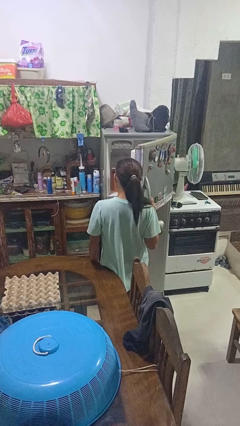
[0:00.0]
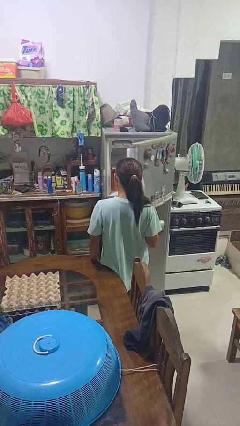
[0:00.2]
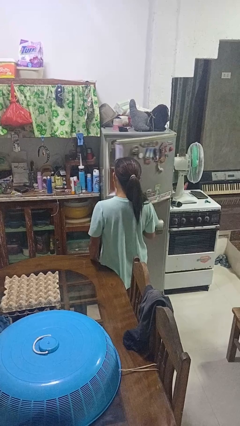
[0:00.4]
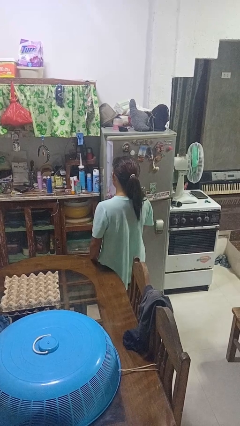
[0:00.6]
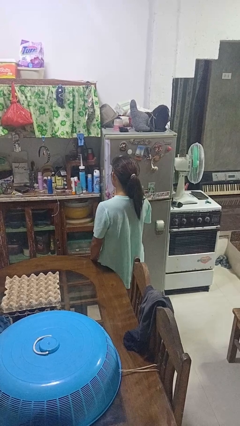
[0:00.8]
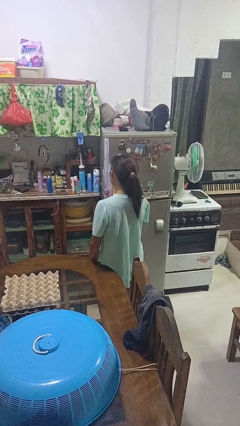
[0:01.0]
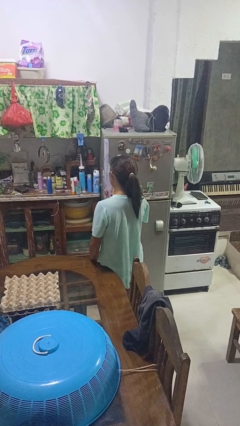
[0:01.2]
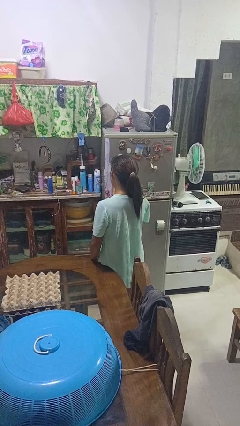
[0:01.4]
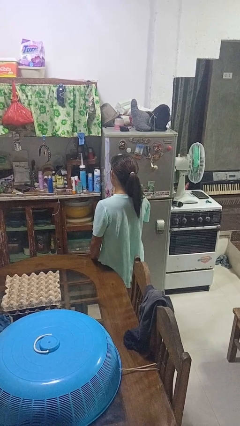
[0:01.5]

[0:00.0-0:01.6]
person closes refrigerator

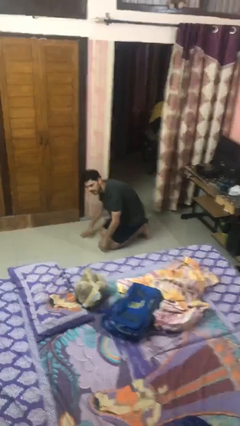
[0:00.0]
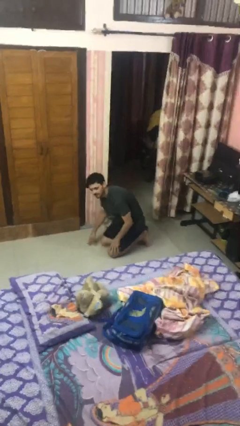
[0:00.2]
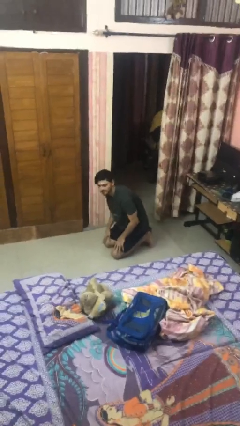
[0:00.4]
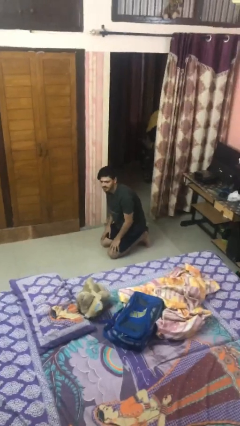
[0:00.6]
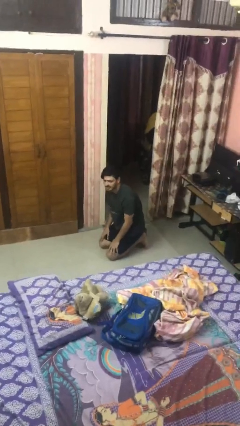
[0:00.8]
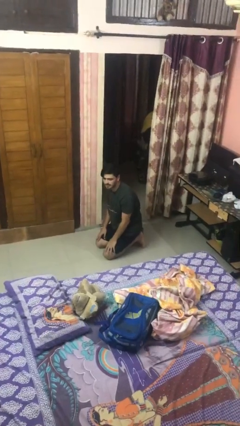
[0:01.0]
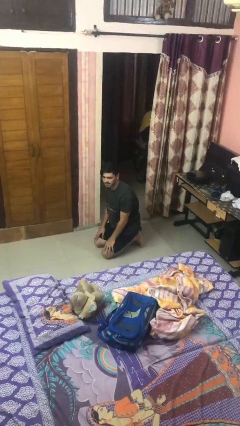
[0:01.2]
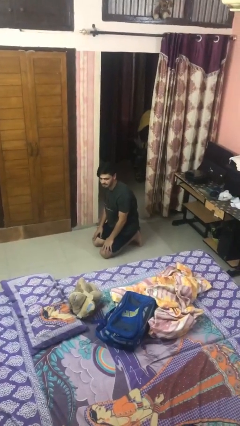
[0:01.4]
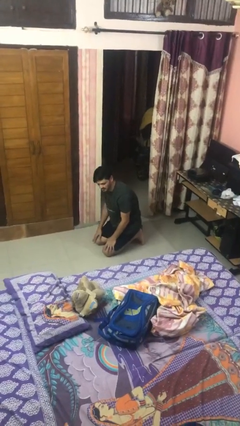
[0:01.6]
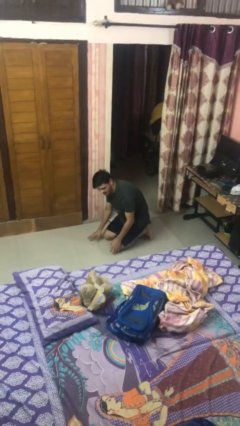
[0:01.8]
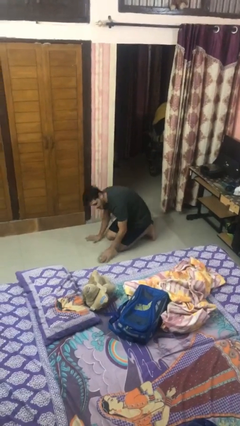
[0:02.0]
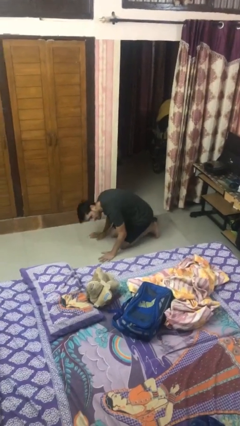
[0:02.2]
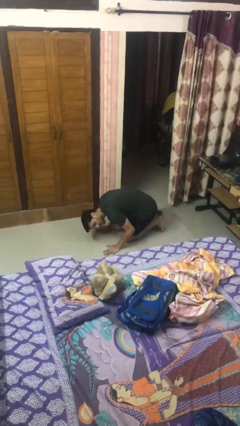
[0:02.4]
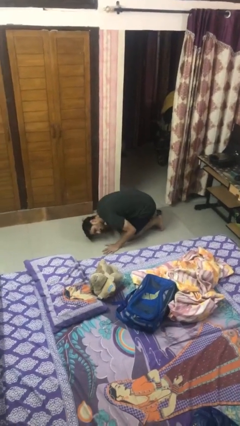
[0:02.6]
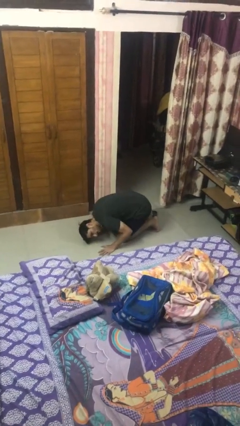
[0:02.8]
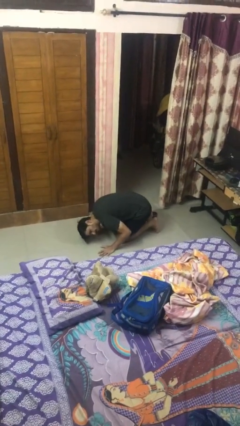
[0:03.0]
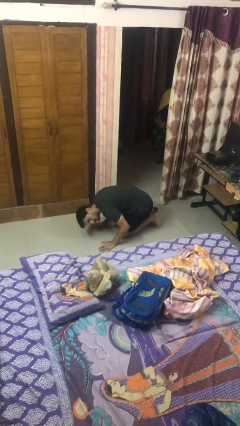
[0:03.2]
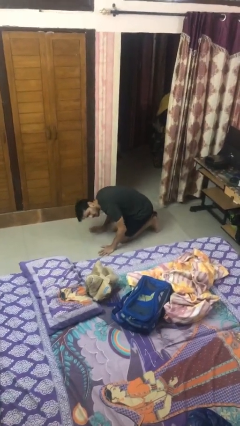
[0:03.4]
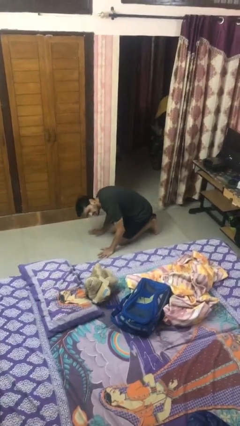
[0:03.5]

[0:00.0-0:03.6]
person searches under bed

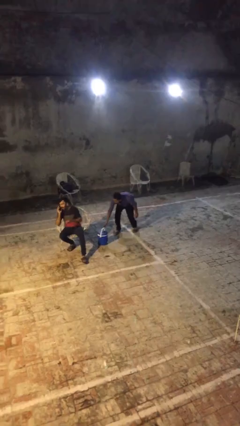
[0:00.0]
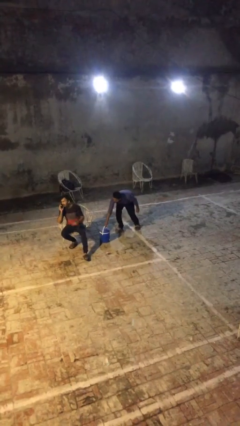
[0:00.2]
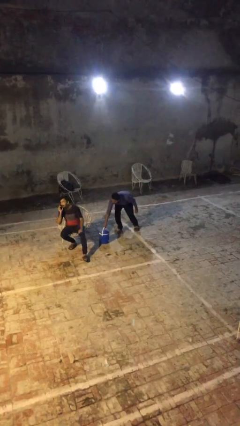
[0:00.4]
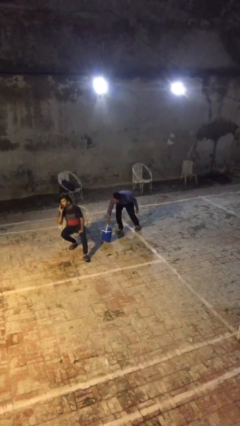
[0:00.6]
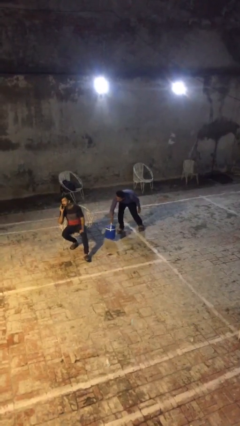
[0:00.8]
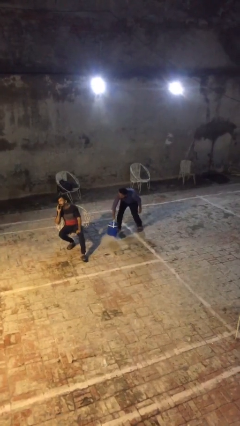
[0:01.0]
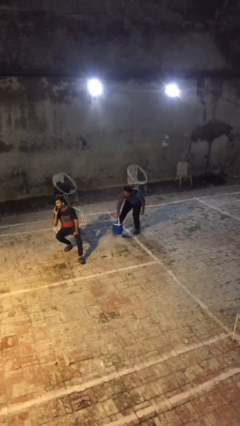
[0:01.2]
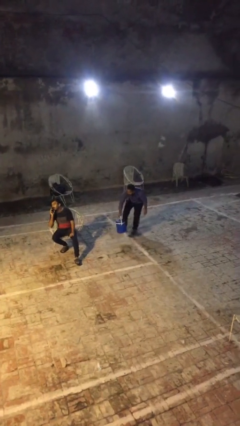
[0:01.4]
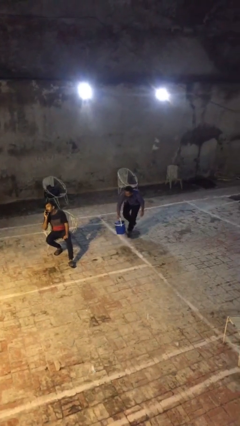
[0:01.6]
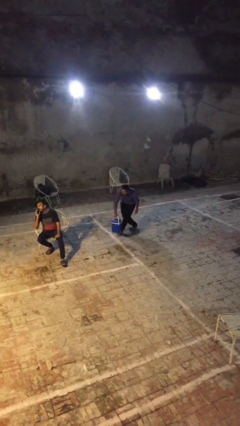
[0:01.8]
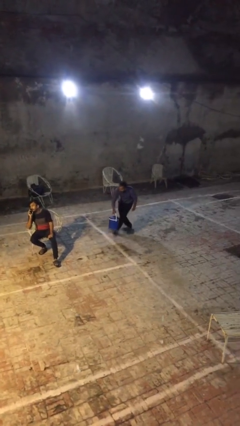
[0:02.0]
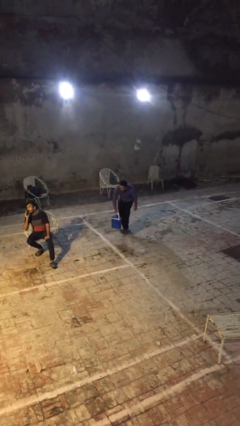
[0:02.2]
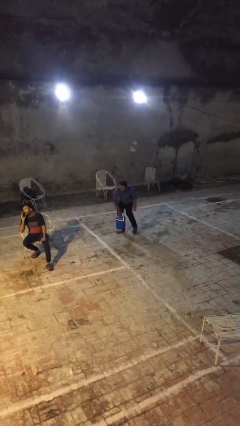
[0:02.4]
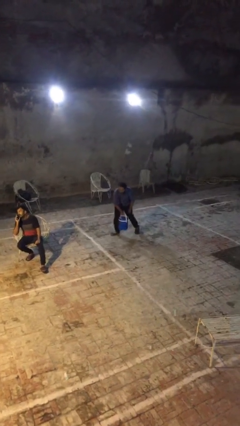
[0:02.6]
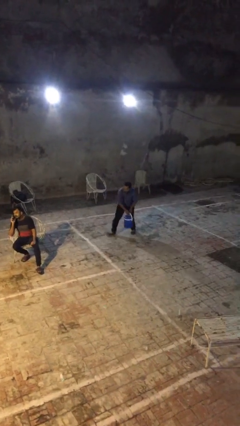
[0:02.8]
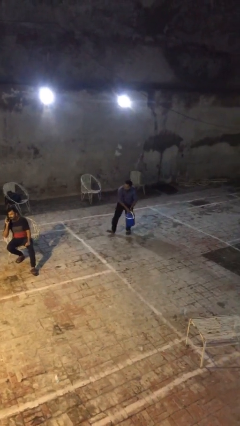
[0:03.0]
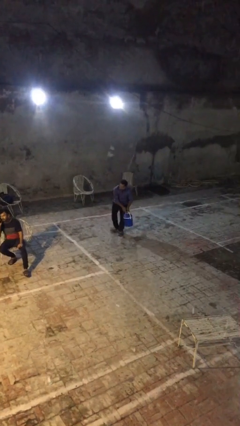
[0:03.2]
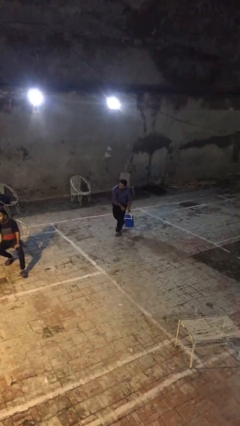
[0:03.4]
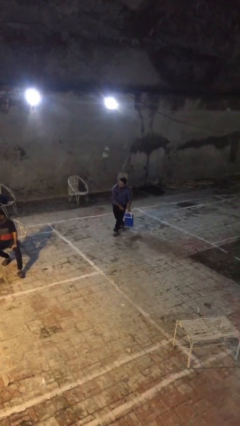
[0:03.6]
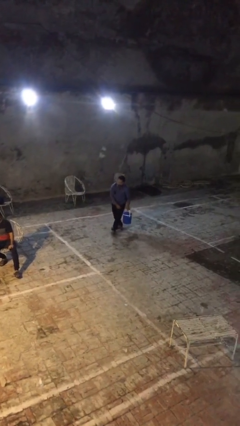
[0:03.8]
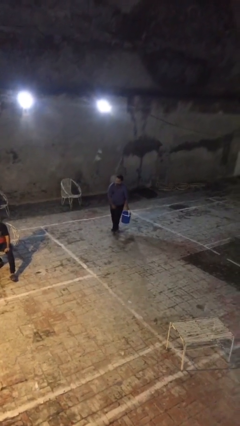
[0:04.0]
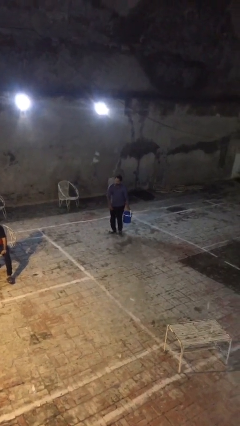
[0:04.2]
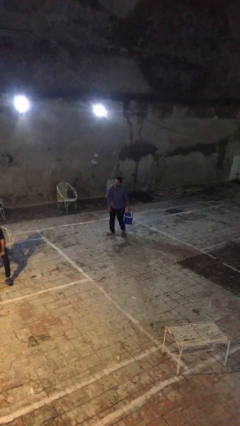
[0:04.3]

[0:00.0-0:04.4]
person steals object from person

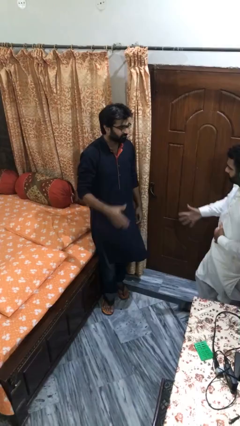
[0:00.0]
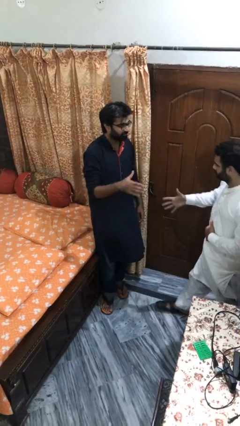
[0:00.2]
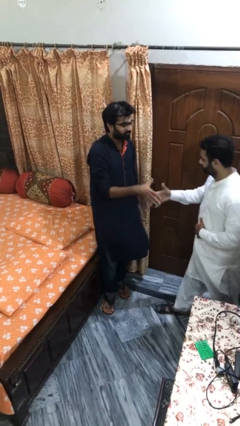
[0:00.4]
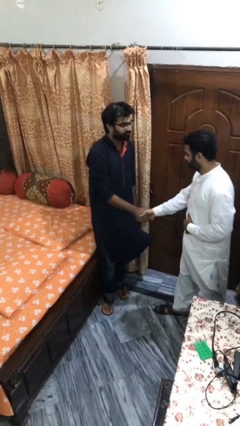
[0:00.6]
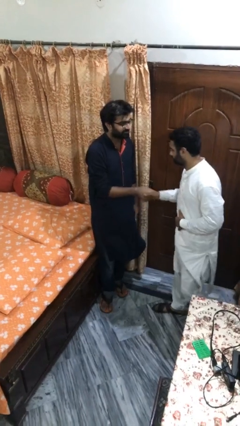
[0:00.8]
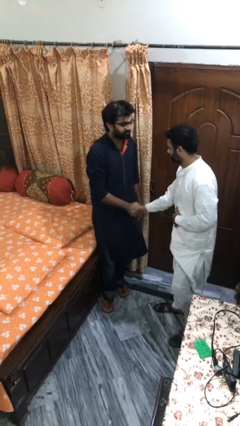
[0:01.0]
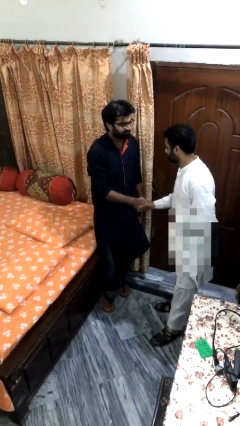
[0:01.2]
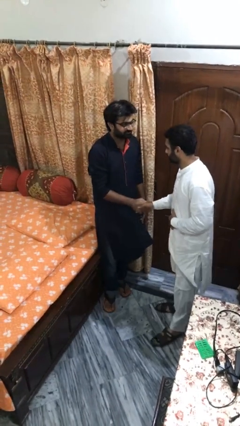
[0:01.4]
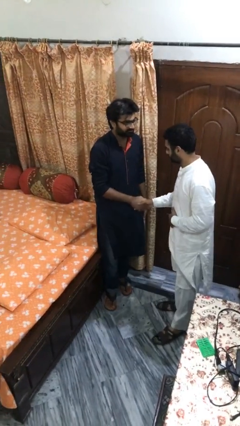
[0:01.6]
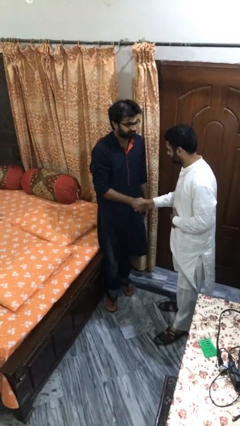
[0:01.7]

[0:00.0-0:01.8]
person shakes hand

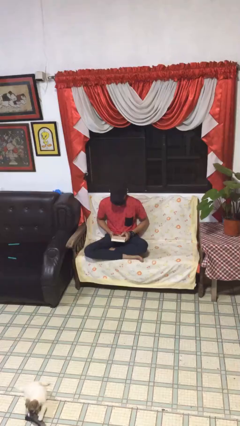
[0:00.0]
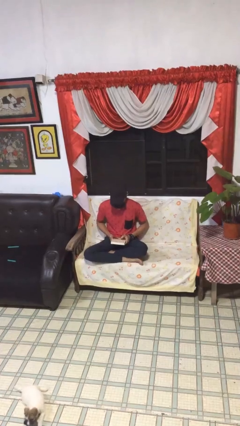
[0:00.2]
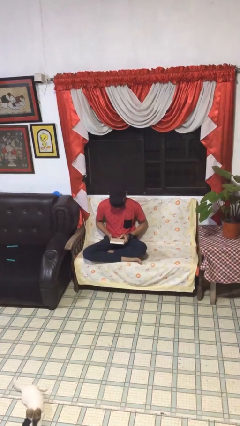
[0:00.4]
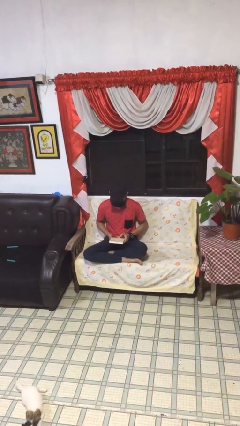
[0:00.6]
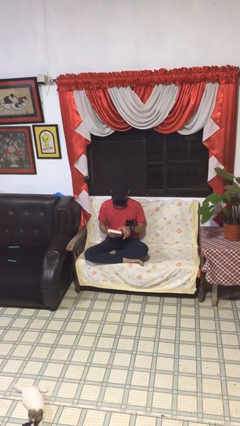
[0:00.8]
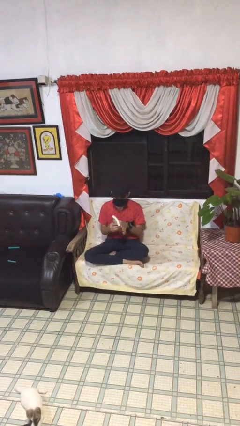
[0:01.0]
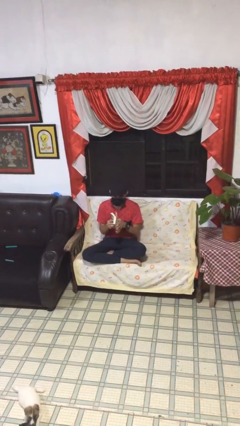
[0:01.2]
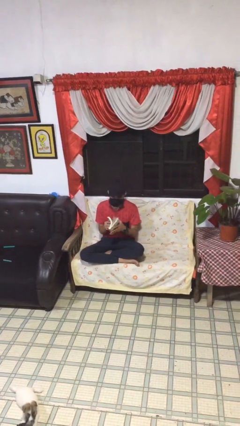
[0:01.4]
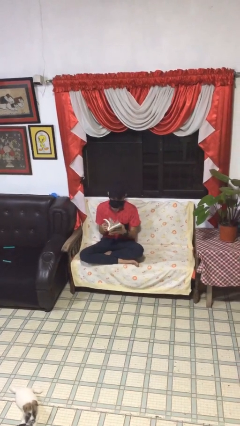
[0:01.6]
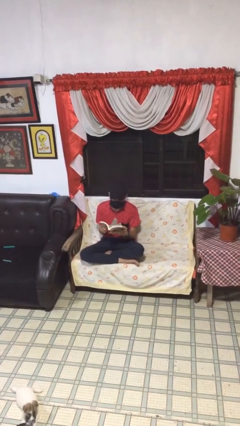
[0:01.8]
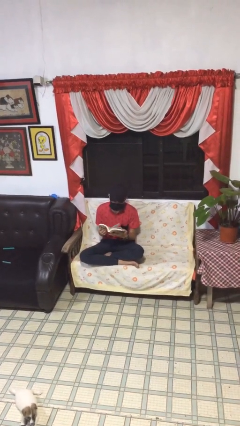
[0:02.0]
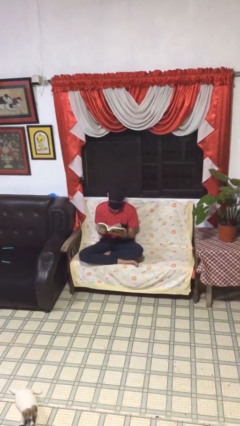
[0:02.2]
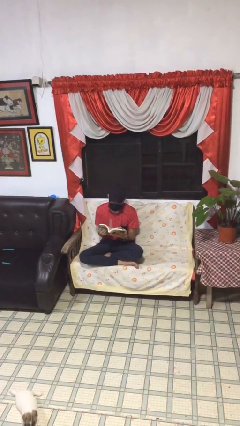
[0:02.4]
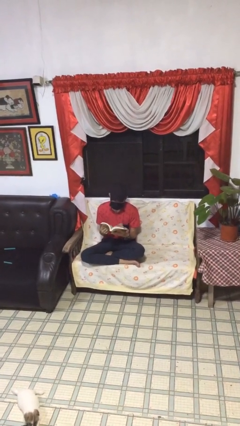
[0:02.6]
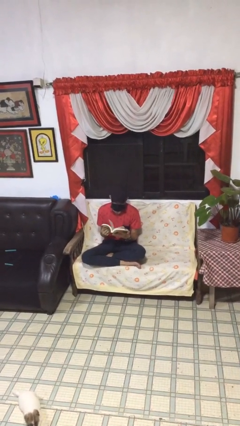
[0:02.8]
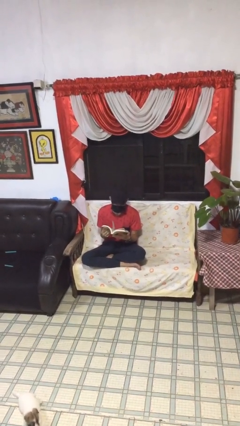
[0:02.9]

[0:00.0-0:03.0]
person reads document

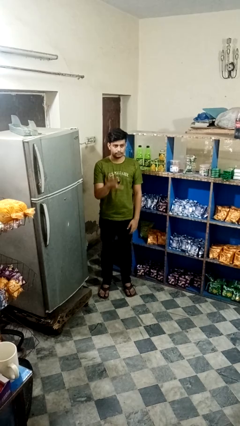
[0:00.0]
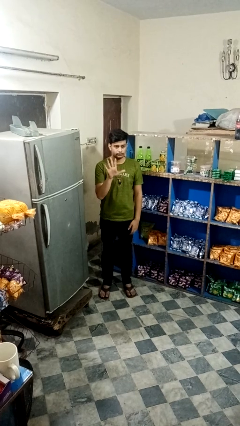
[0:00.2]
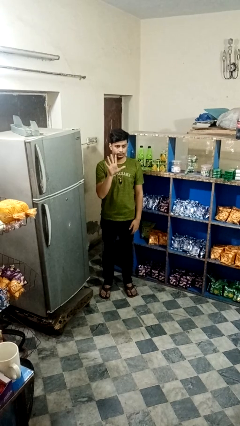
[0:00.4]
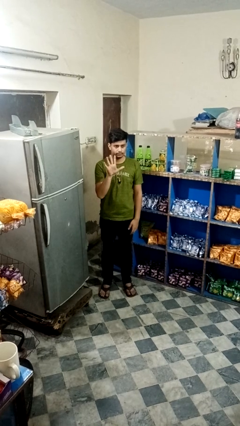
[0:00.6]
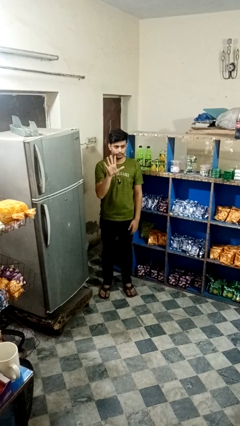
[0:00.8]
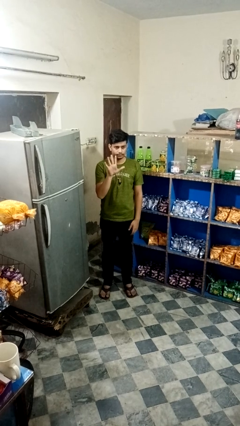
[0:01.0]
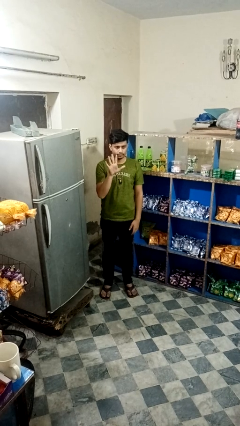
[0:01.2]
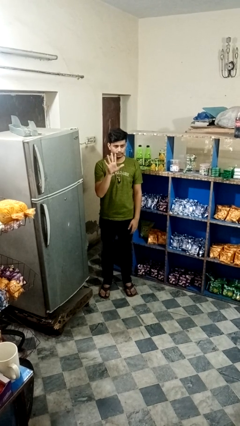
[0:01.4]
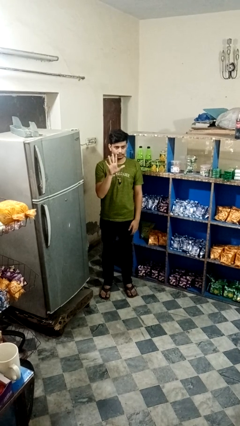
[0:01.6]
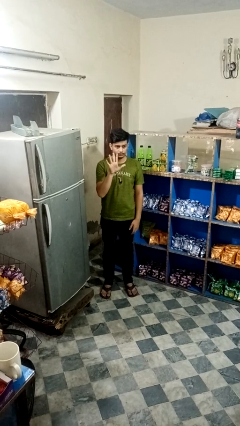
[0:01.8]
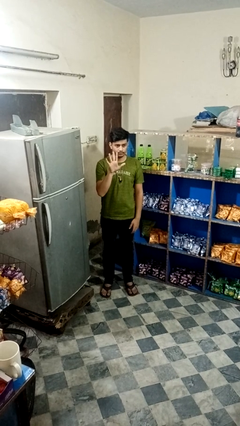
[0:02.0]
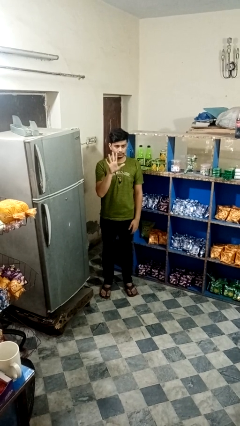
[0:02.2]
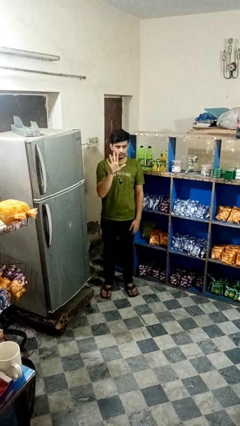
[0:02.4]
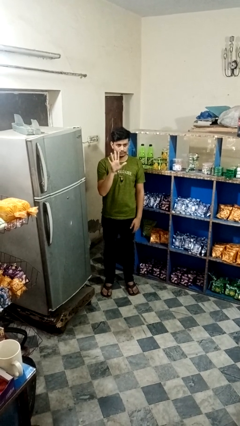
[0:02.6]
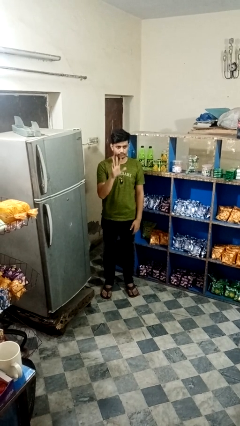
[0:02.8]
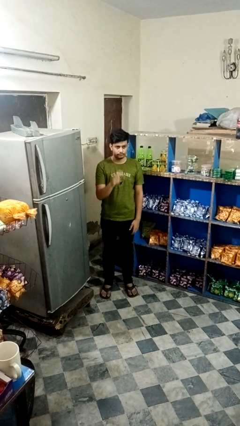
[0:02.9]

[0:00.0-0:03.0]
person gestures number five
